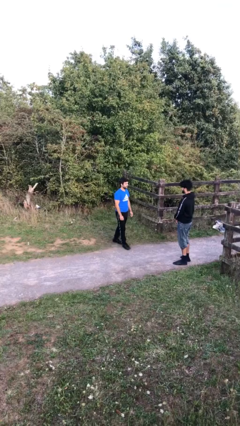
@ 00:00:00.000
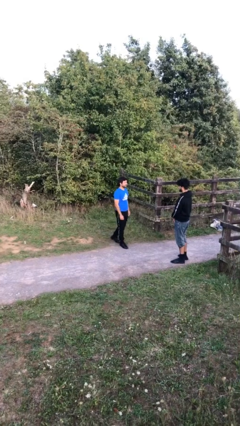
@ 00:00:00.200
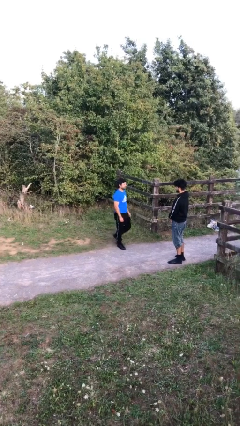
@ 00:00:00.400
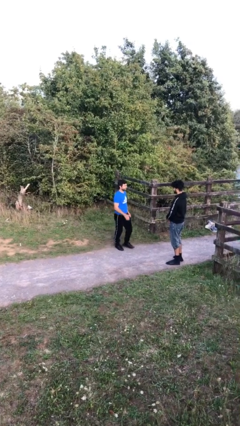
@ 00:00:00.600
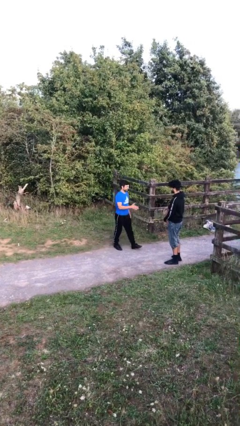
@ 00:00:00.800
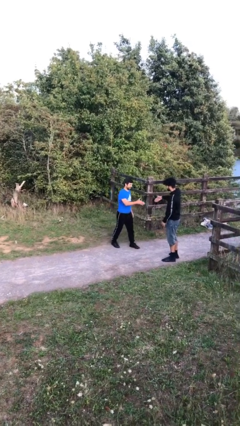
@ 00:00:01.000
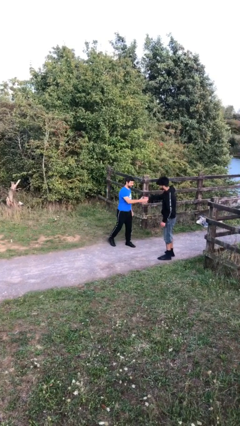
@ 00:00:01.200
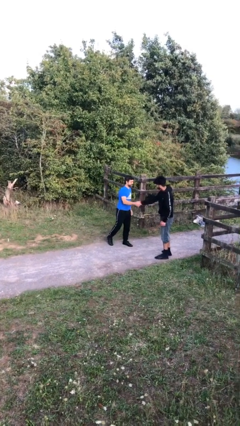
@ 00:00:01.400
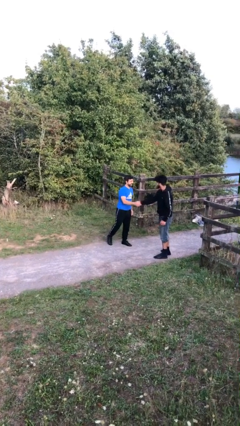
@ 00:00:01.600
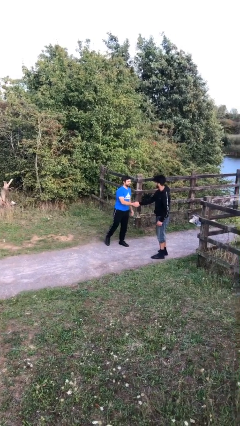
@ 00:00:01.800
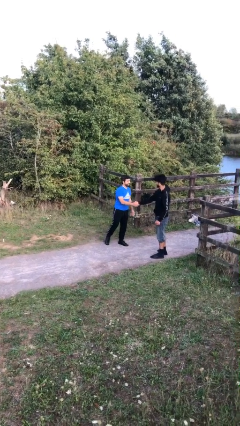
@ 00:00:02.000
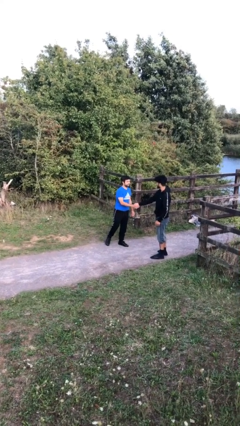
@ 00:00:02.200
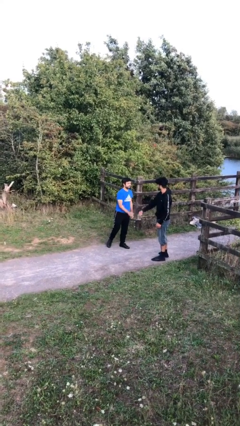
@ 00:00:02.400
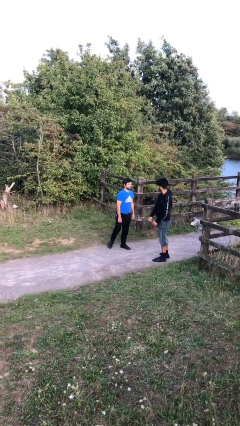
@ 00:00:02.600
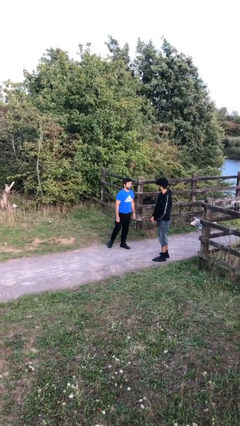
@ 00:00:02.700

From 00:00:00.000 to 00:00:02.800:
person shakes hand

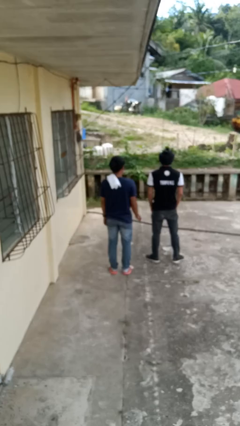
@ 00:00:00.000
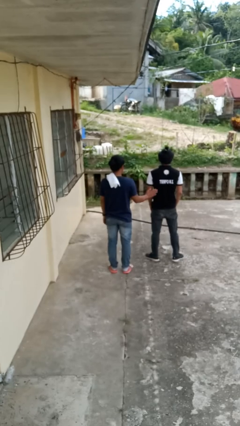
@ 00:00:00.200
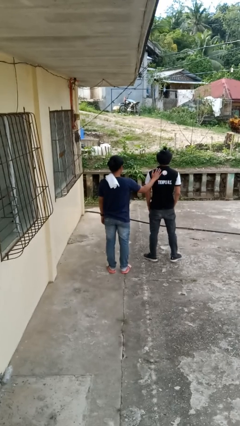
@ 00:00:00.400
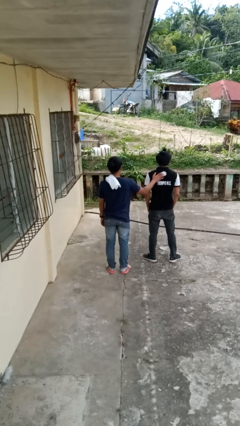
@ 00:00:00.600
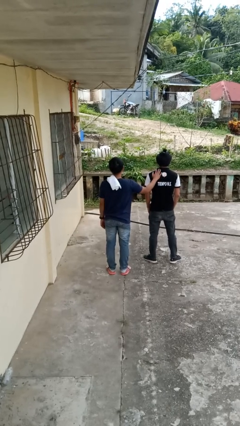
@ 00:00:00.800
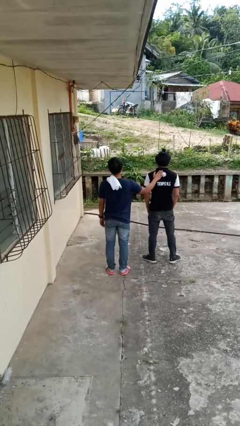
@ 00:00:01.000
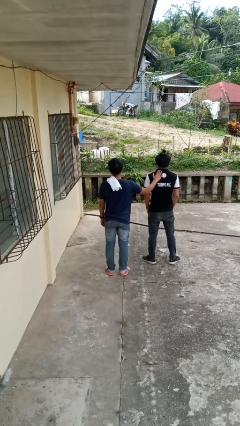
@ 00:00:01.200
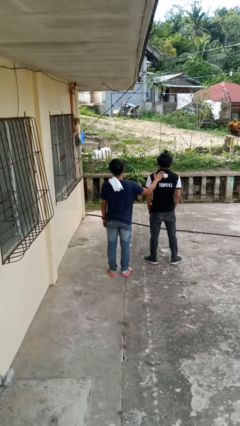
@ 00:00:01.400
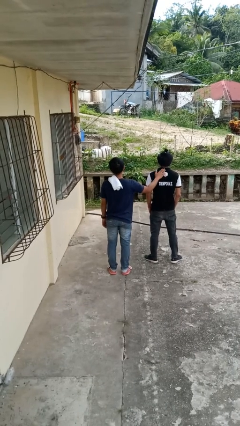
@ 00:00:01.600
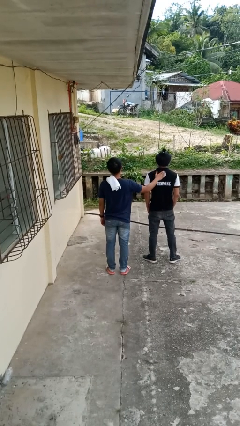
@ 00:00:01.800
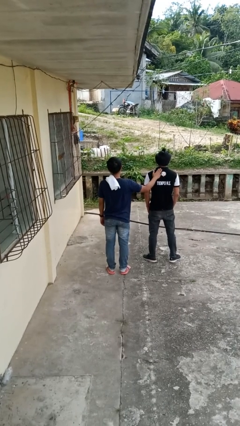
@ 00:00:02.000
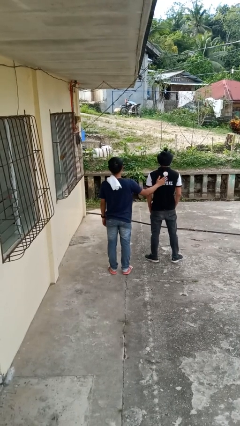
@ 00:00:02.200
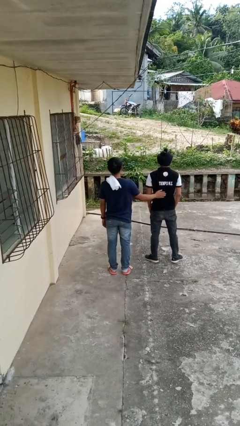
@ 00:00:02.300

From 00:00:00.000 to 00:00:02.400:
person touches back of person

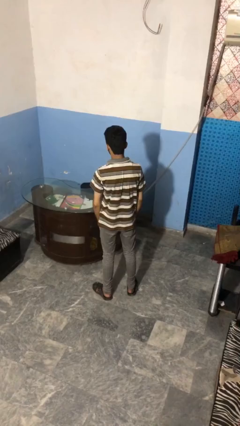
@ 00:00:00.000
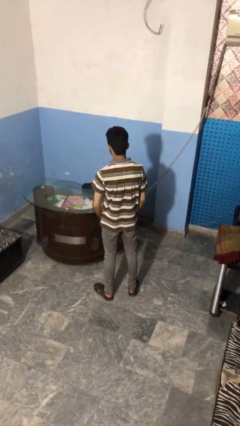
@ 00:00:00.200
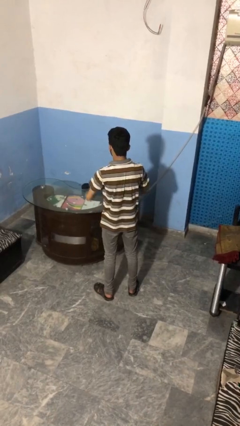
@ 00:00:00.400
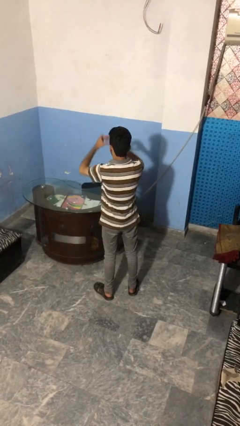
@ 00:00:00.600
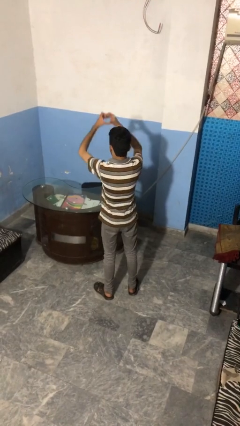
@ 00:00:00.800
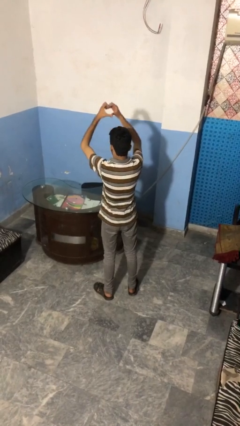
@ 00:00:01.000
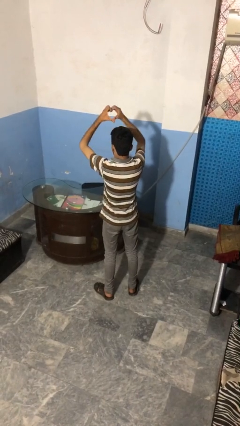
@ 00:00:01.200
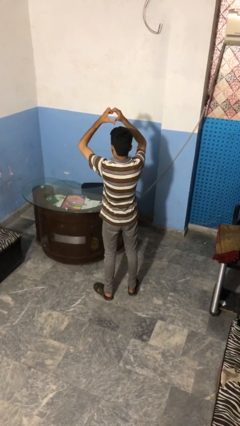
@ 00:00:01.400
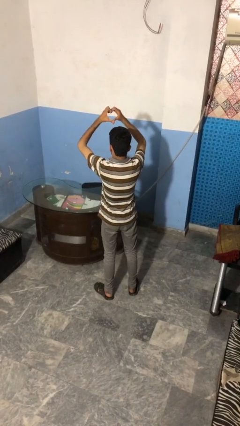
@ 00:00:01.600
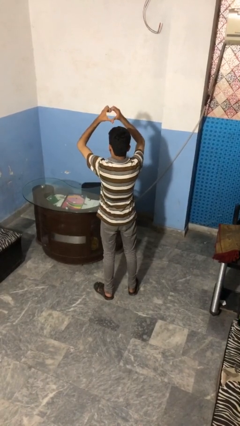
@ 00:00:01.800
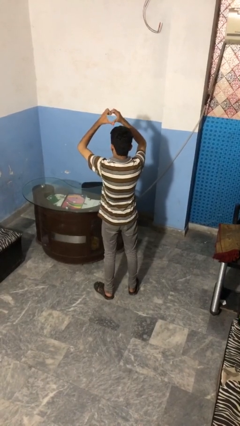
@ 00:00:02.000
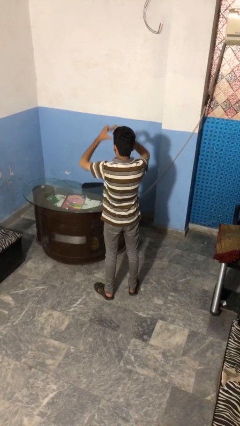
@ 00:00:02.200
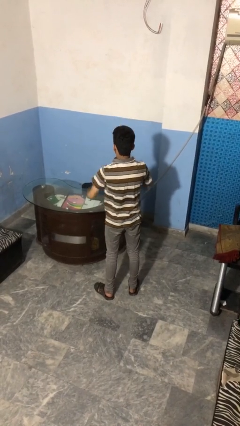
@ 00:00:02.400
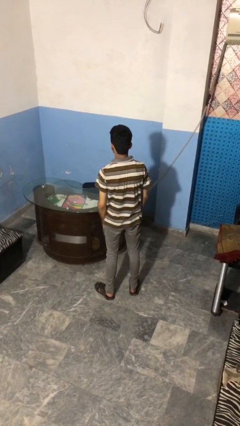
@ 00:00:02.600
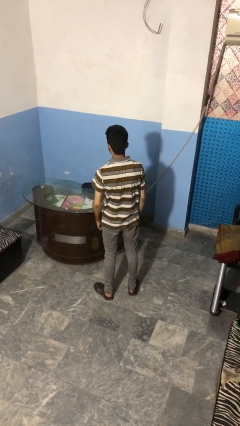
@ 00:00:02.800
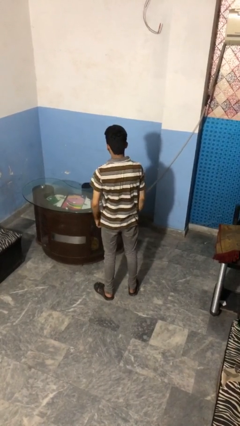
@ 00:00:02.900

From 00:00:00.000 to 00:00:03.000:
person gestures heart

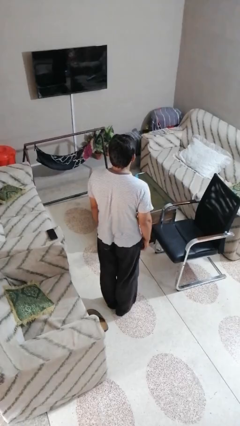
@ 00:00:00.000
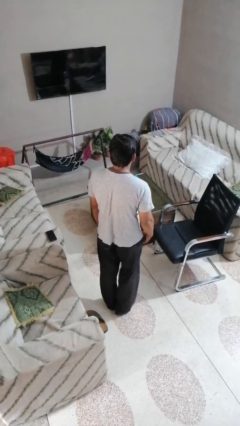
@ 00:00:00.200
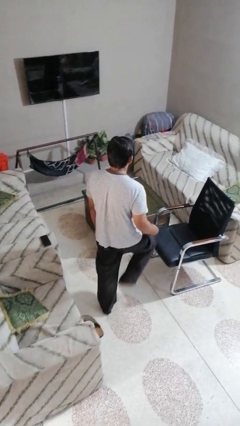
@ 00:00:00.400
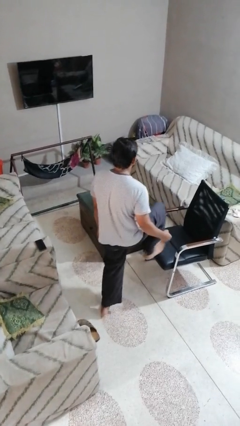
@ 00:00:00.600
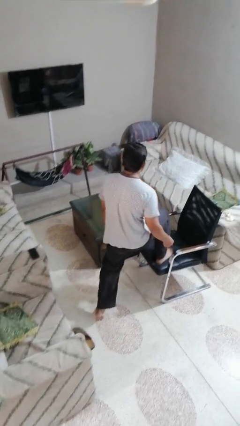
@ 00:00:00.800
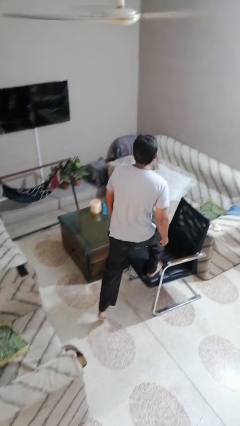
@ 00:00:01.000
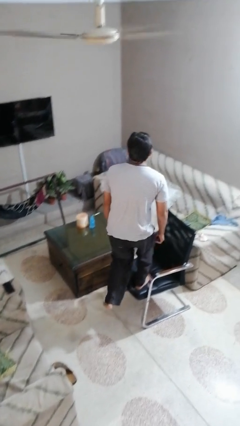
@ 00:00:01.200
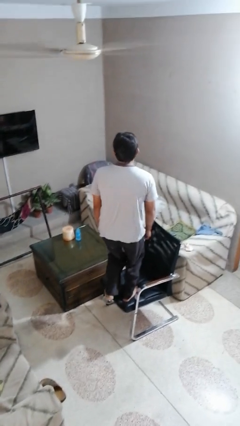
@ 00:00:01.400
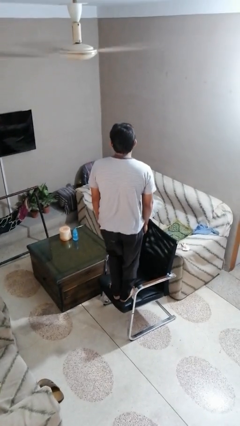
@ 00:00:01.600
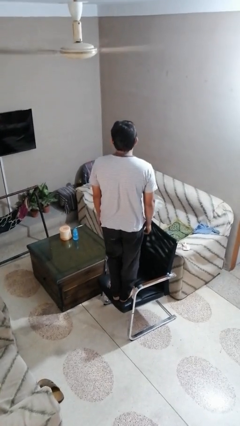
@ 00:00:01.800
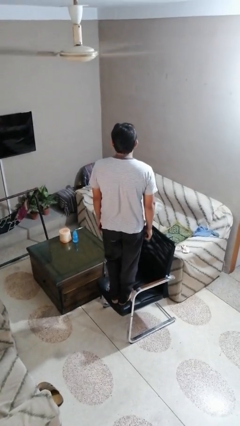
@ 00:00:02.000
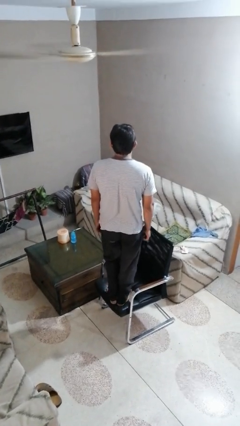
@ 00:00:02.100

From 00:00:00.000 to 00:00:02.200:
person climbs on chair

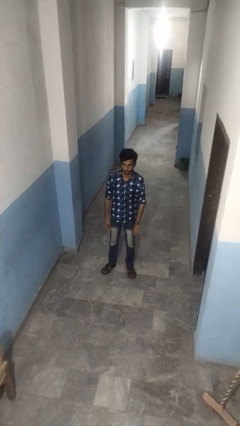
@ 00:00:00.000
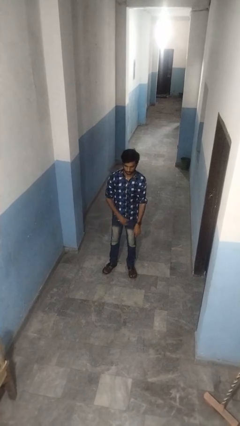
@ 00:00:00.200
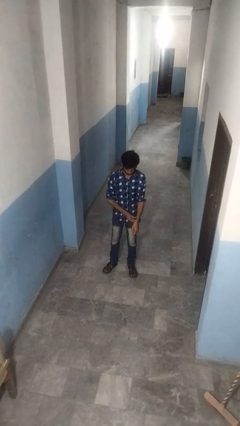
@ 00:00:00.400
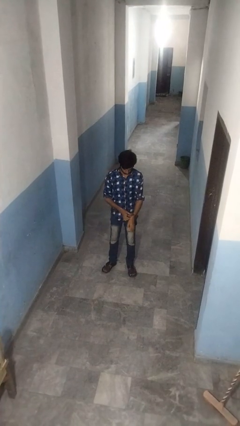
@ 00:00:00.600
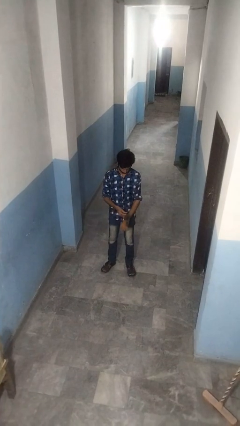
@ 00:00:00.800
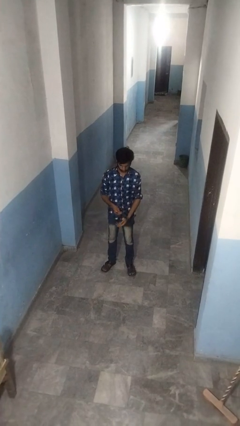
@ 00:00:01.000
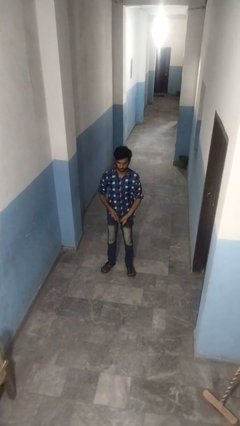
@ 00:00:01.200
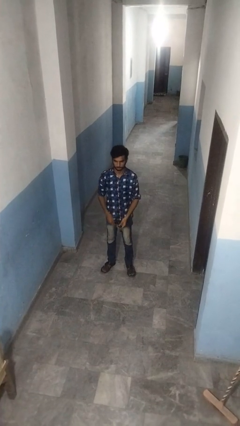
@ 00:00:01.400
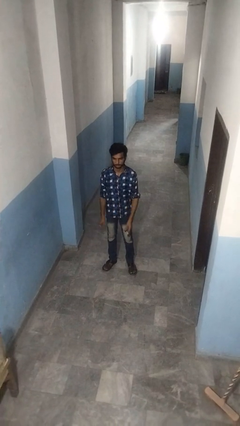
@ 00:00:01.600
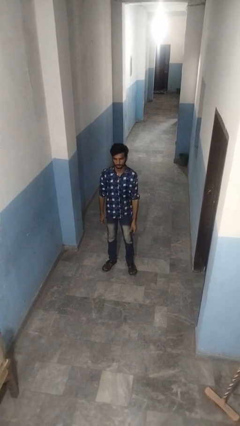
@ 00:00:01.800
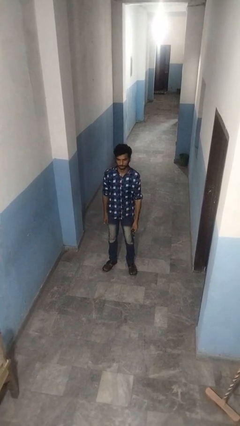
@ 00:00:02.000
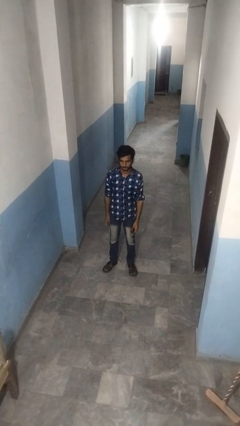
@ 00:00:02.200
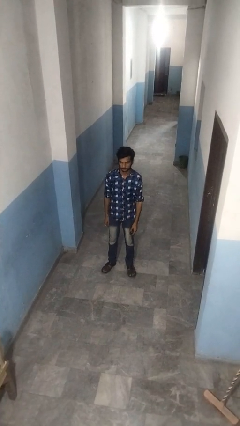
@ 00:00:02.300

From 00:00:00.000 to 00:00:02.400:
person takes off wristwatch

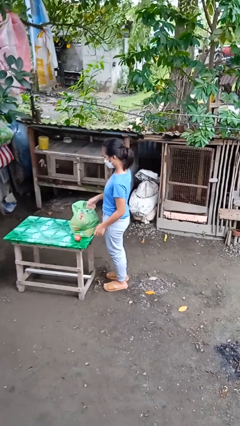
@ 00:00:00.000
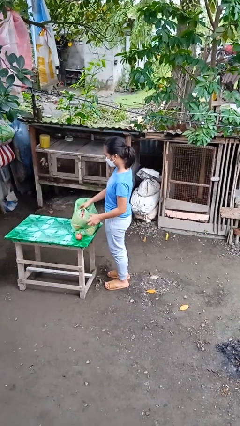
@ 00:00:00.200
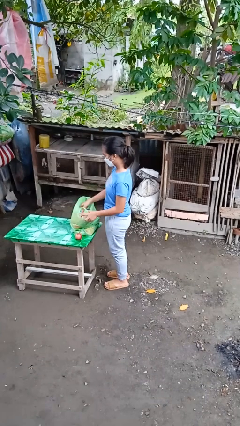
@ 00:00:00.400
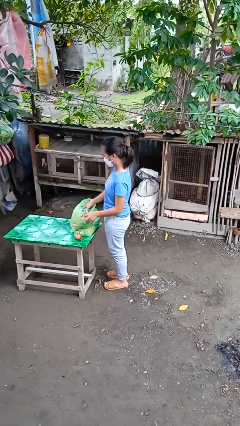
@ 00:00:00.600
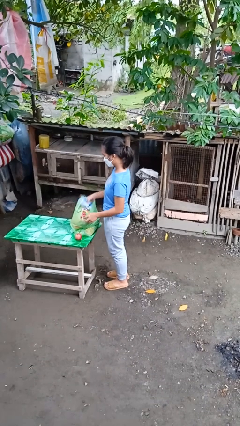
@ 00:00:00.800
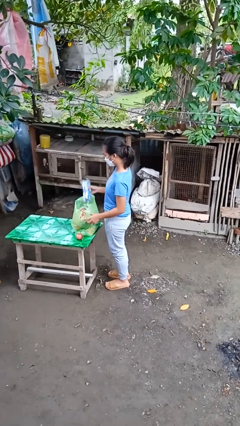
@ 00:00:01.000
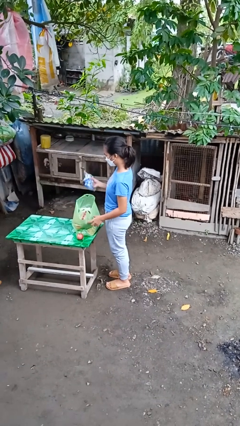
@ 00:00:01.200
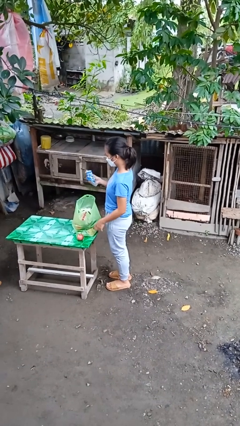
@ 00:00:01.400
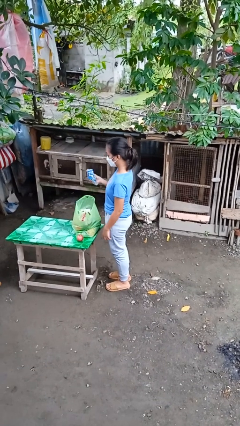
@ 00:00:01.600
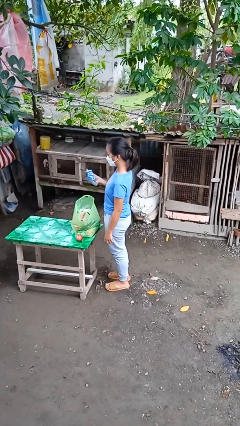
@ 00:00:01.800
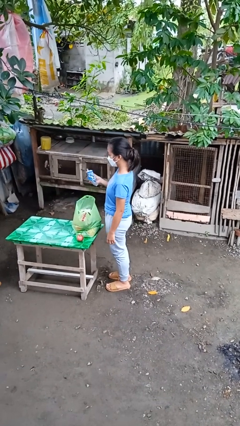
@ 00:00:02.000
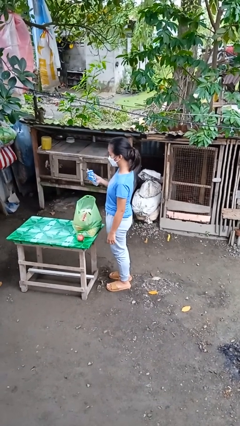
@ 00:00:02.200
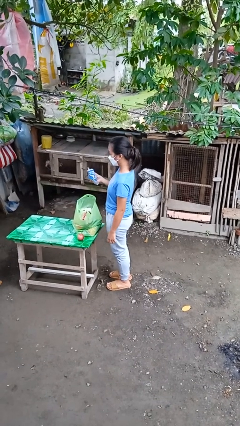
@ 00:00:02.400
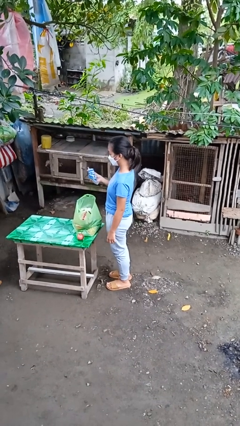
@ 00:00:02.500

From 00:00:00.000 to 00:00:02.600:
person takes object from bag

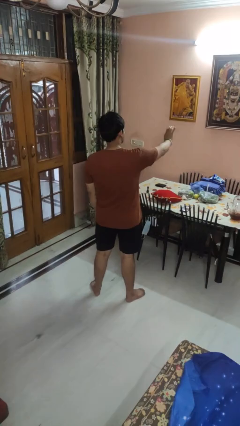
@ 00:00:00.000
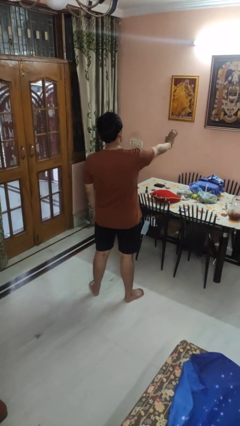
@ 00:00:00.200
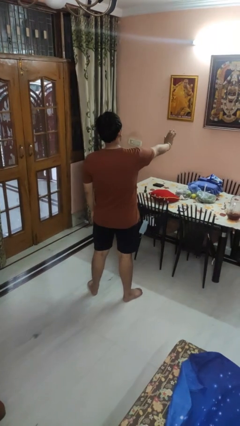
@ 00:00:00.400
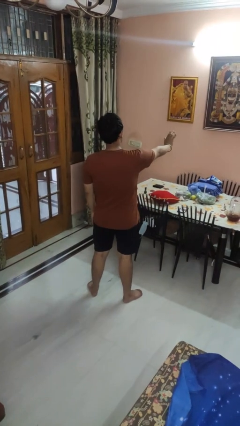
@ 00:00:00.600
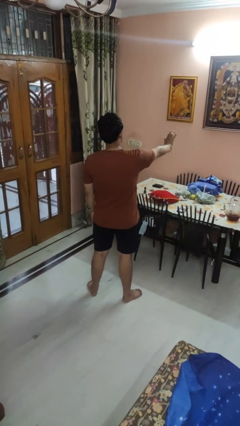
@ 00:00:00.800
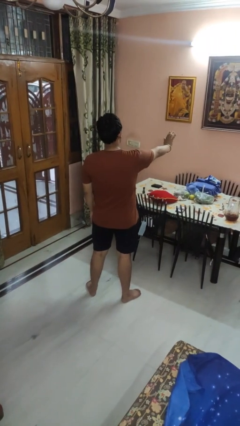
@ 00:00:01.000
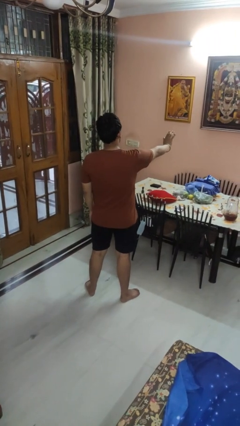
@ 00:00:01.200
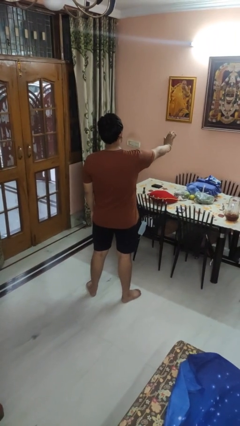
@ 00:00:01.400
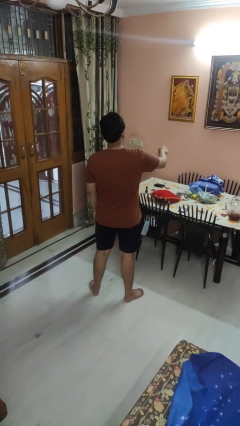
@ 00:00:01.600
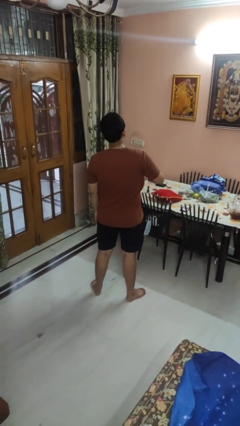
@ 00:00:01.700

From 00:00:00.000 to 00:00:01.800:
person gestures stop
